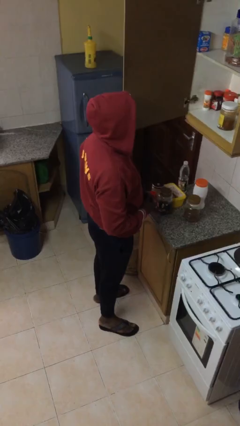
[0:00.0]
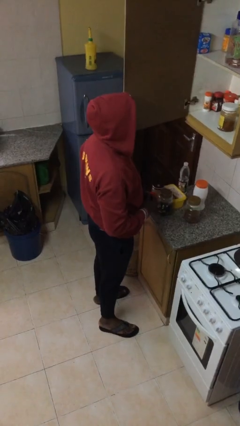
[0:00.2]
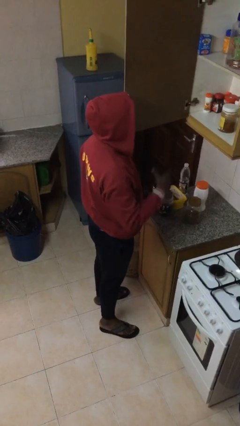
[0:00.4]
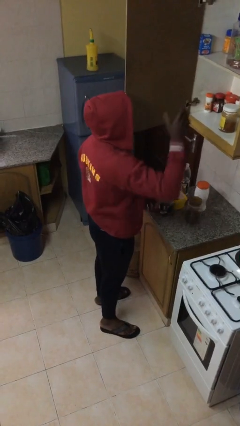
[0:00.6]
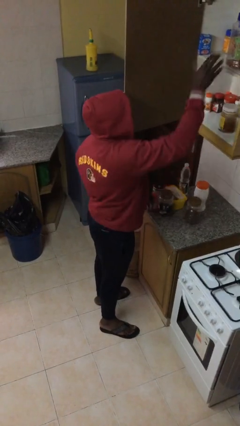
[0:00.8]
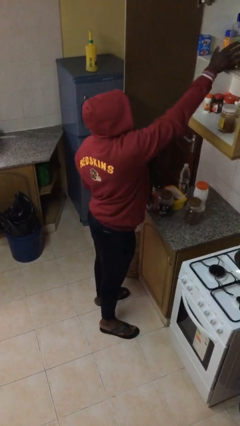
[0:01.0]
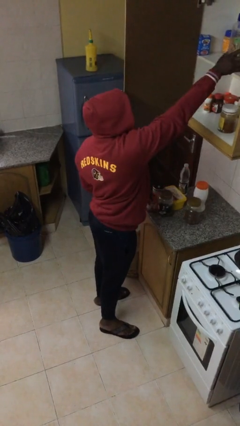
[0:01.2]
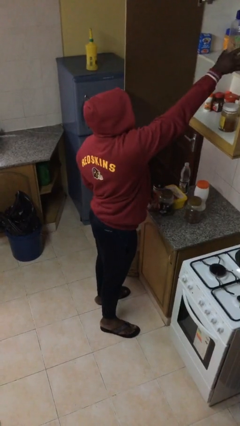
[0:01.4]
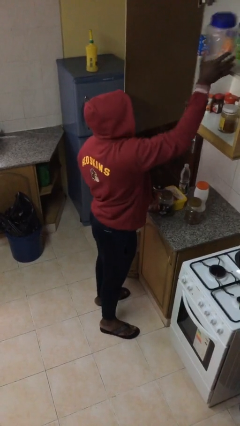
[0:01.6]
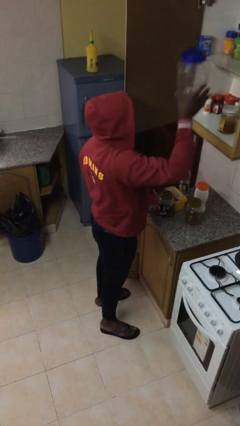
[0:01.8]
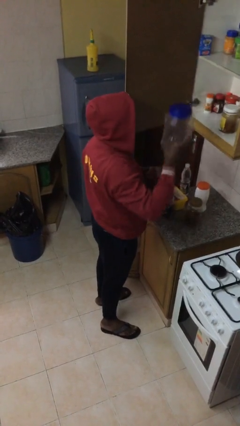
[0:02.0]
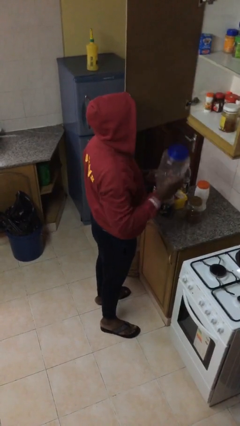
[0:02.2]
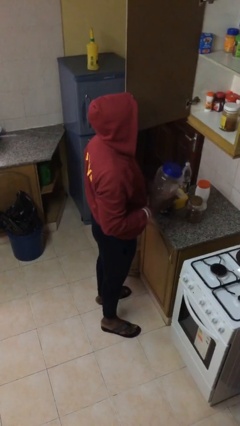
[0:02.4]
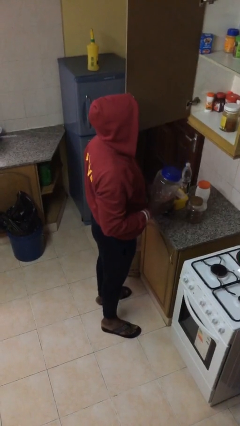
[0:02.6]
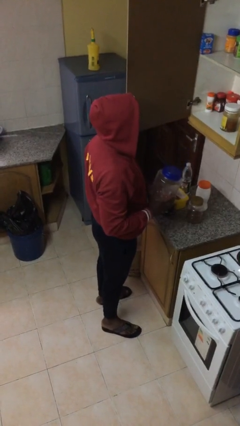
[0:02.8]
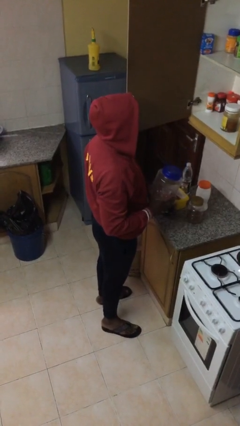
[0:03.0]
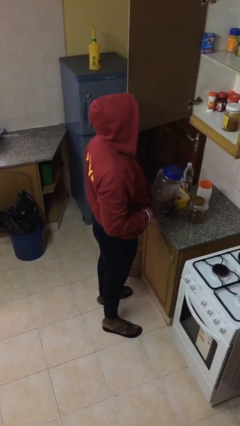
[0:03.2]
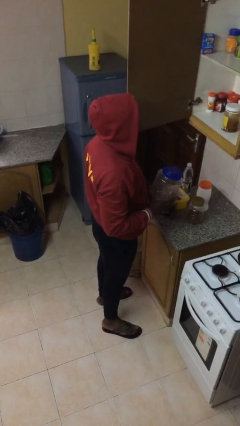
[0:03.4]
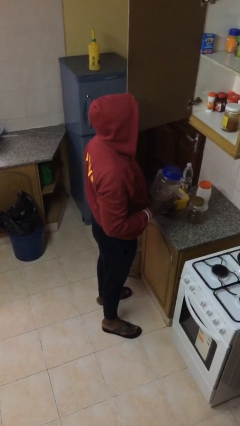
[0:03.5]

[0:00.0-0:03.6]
person picks up object from shelf

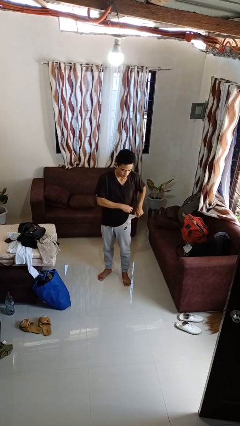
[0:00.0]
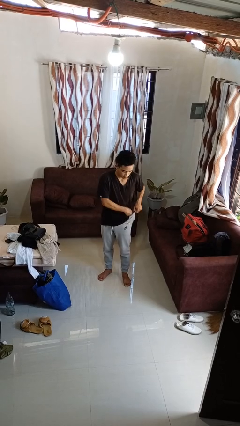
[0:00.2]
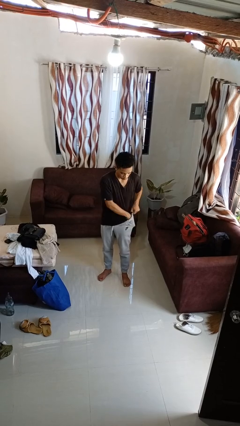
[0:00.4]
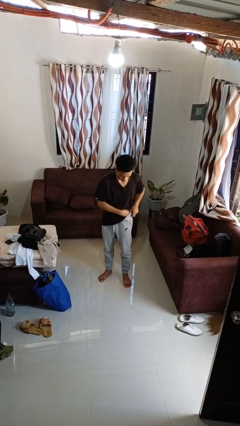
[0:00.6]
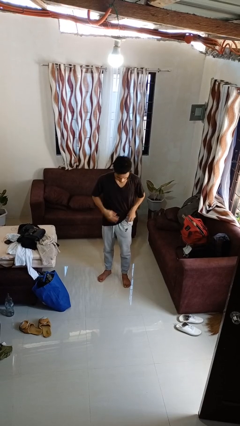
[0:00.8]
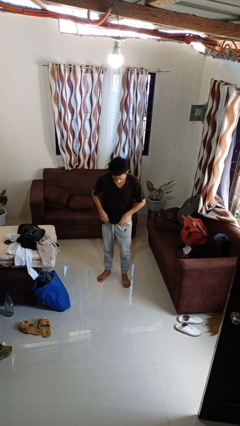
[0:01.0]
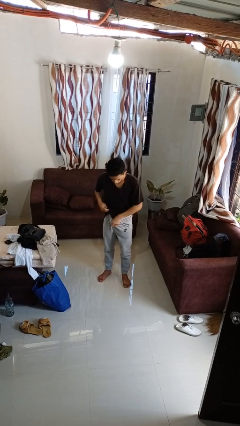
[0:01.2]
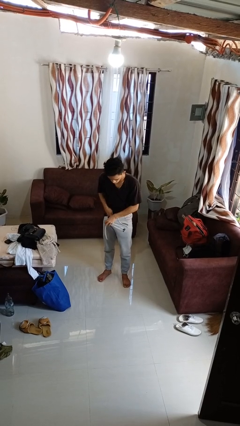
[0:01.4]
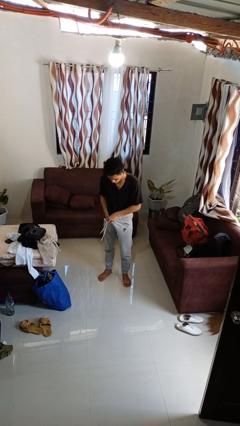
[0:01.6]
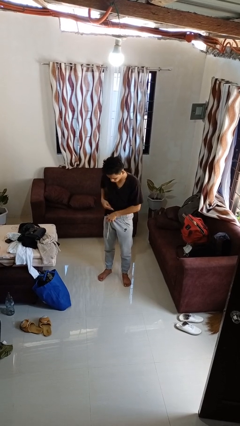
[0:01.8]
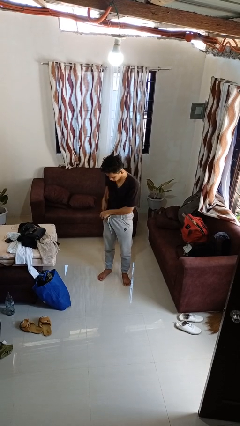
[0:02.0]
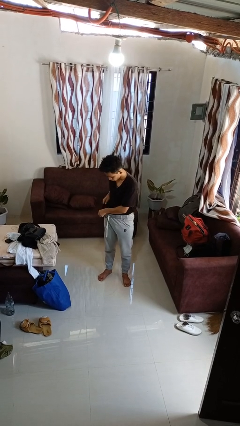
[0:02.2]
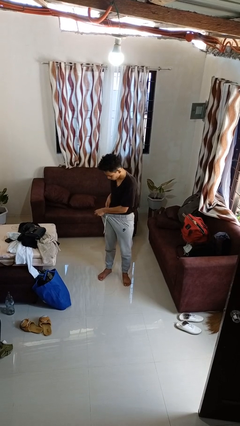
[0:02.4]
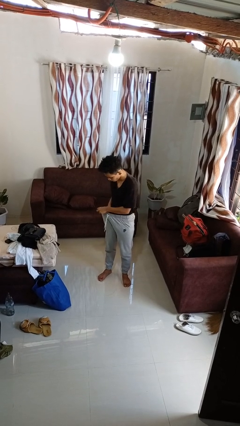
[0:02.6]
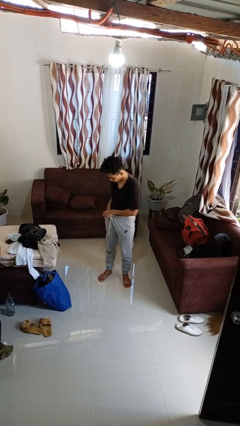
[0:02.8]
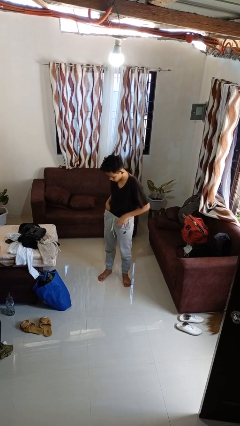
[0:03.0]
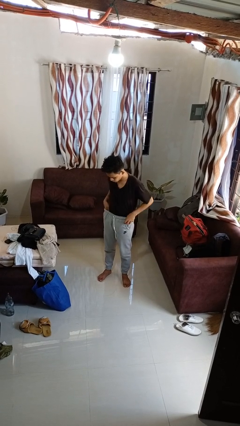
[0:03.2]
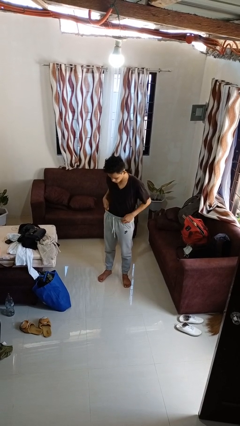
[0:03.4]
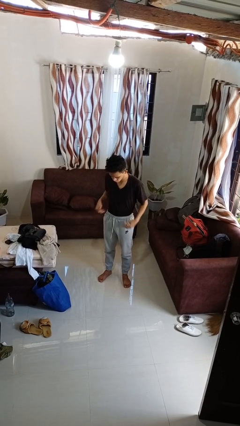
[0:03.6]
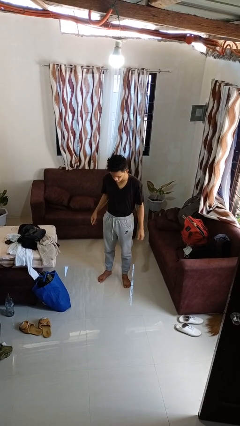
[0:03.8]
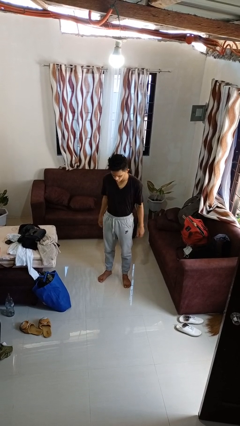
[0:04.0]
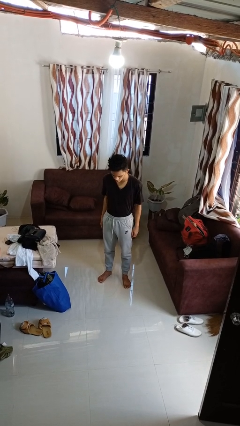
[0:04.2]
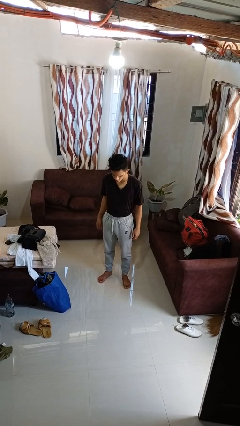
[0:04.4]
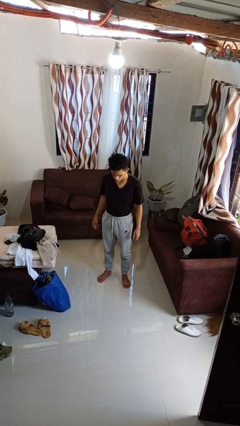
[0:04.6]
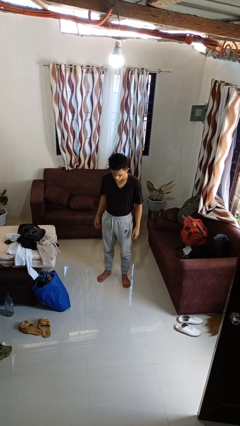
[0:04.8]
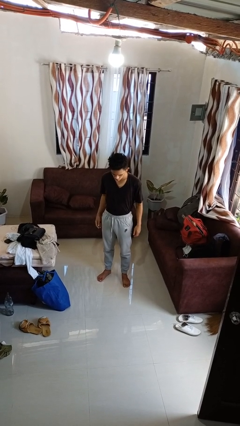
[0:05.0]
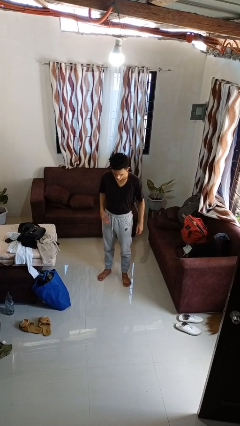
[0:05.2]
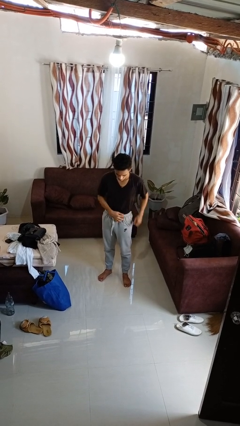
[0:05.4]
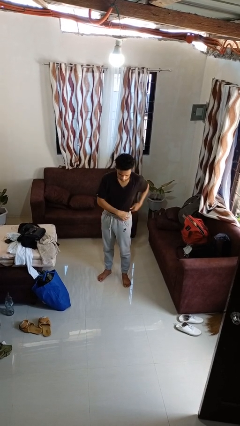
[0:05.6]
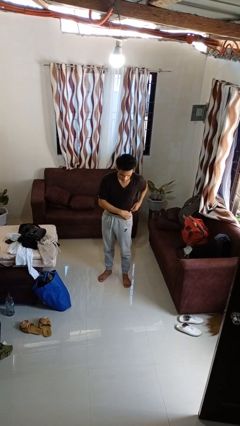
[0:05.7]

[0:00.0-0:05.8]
person tucks in shirt

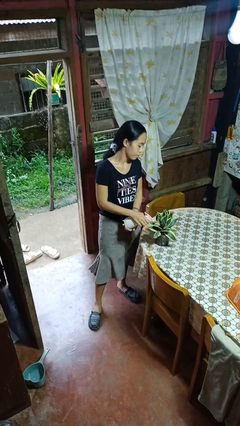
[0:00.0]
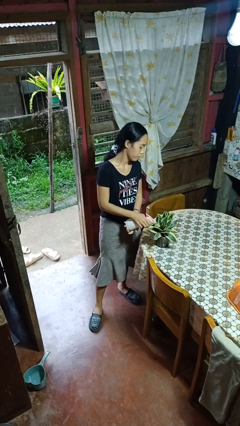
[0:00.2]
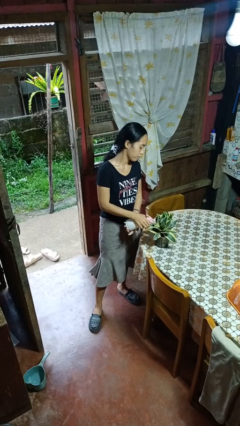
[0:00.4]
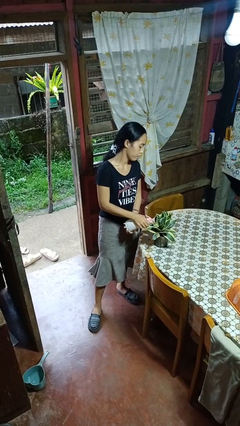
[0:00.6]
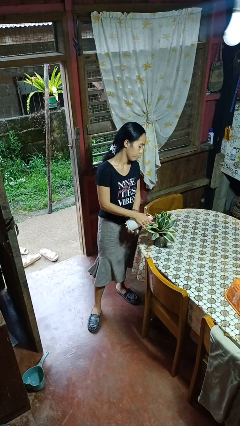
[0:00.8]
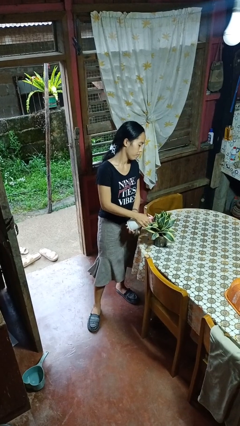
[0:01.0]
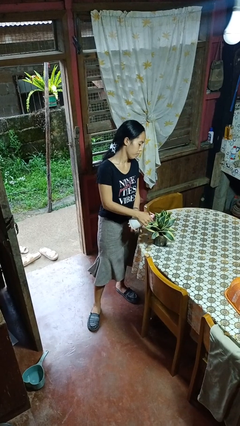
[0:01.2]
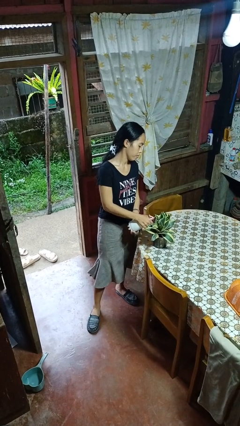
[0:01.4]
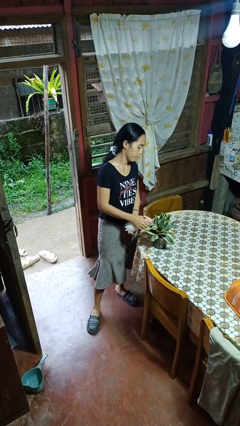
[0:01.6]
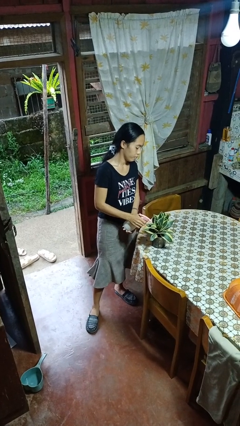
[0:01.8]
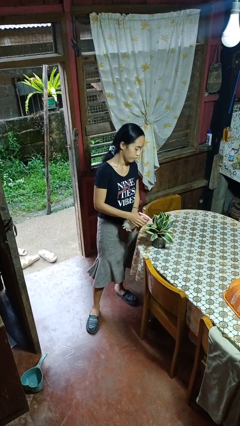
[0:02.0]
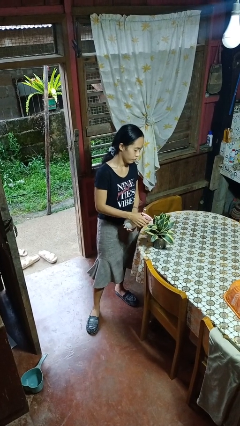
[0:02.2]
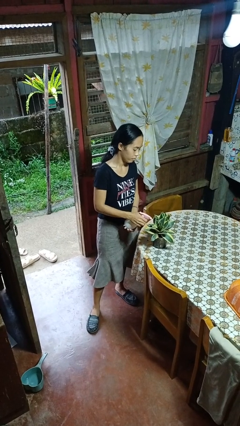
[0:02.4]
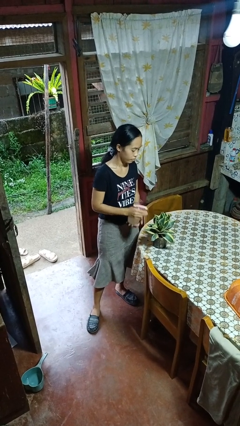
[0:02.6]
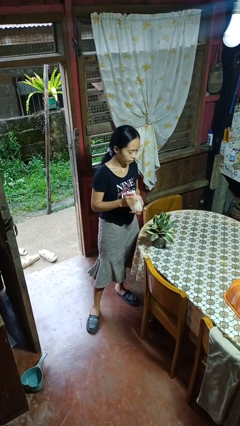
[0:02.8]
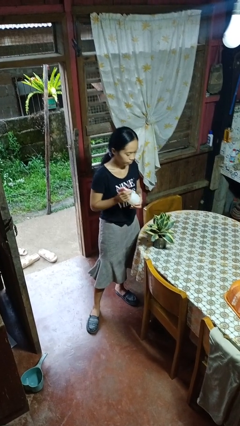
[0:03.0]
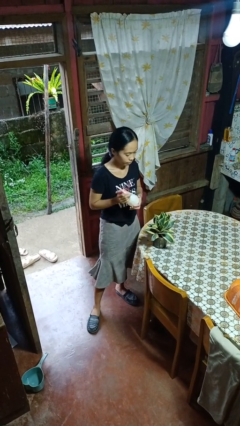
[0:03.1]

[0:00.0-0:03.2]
person waters houseplant

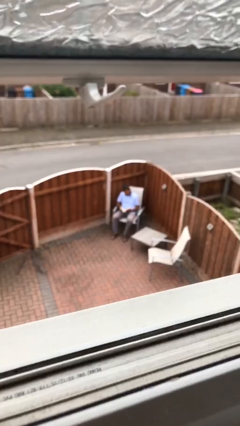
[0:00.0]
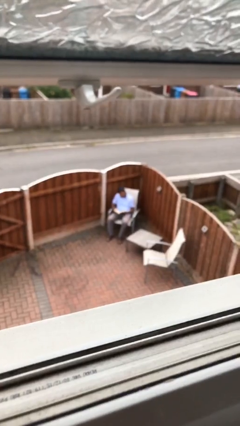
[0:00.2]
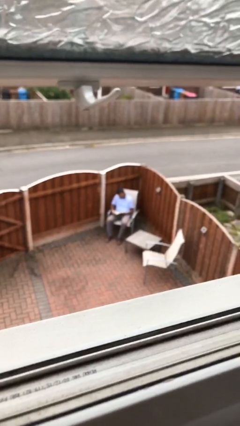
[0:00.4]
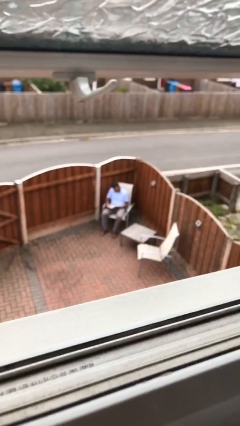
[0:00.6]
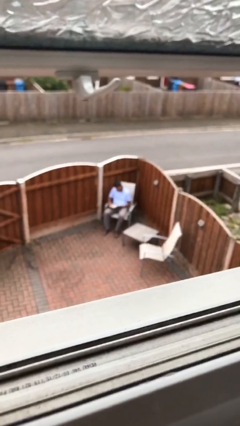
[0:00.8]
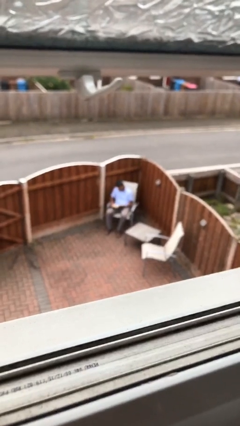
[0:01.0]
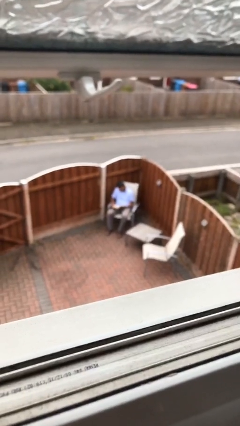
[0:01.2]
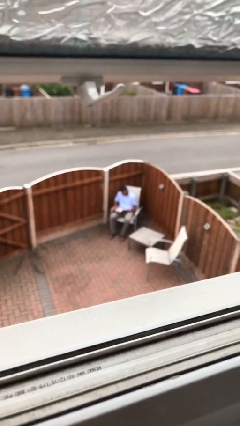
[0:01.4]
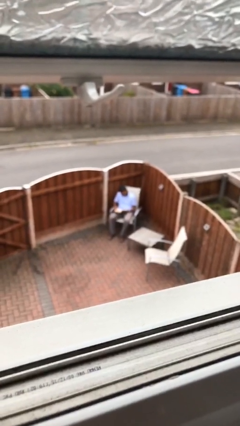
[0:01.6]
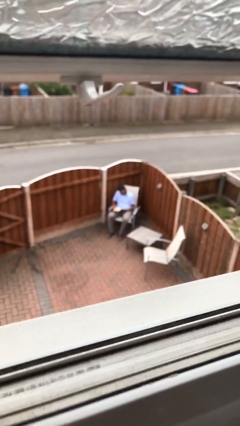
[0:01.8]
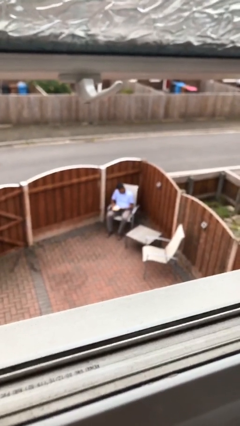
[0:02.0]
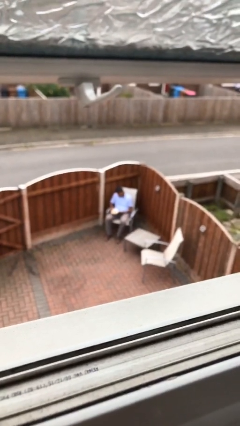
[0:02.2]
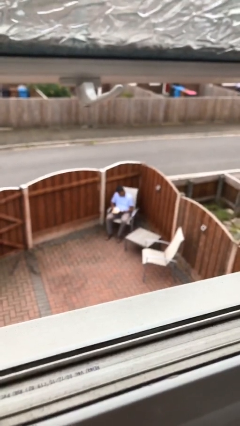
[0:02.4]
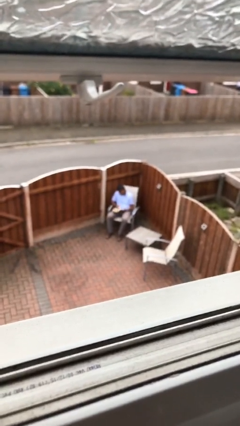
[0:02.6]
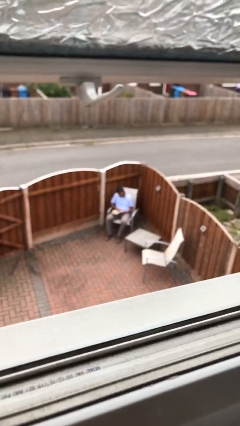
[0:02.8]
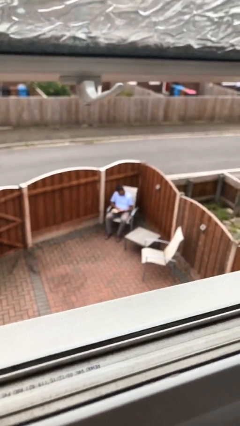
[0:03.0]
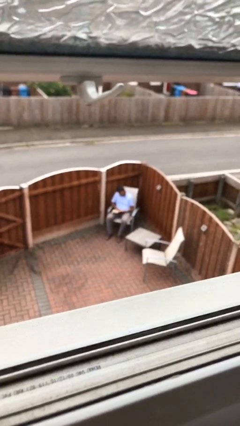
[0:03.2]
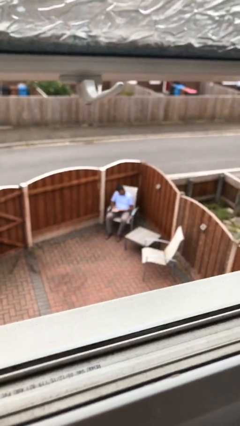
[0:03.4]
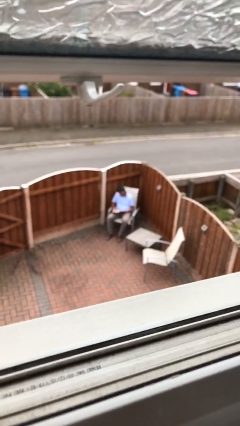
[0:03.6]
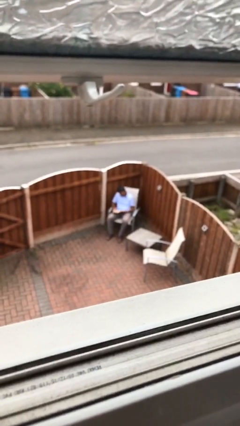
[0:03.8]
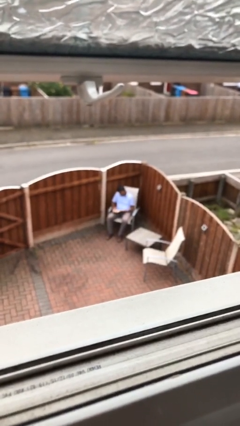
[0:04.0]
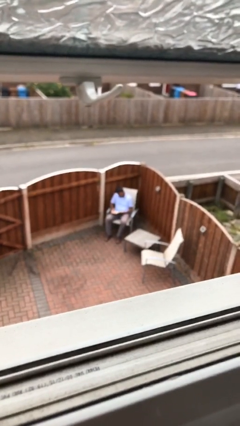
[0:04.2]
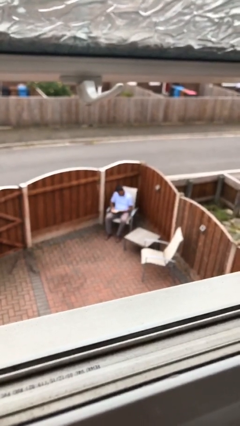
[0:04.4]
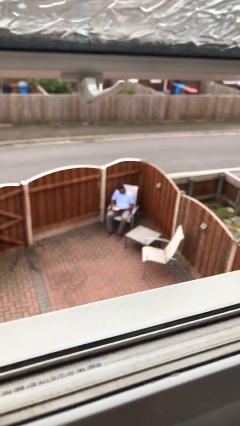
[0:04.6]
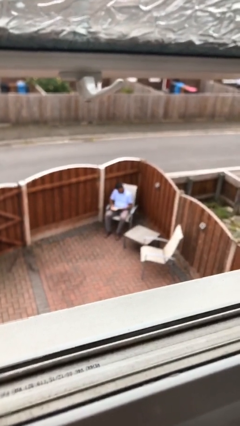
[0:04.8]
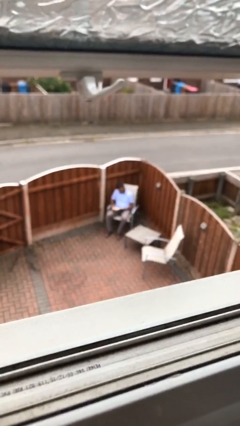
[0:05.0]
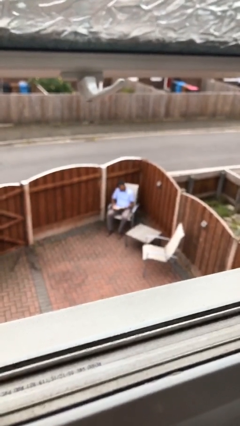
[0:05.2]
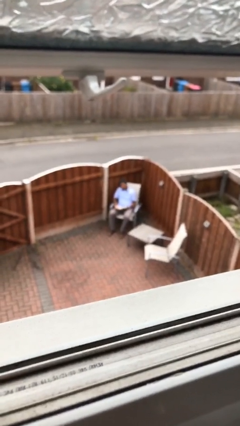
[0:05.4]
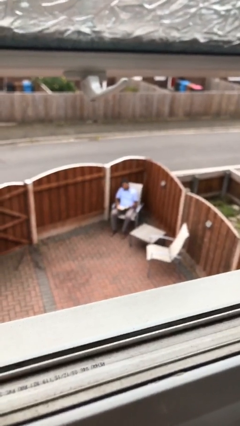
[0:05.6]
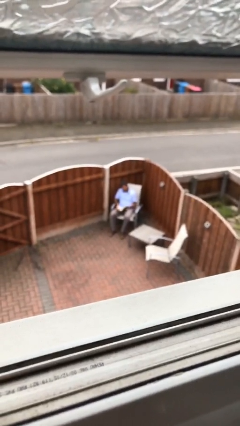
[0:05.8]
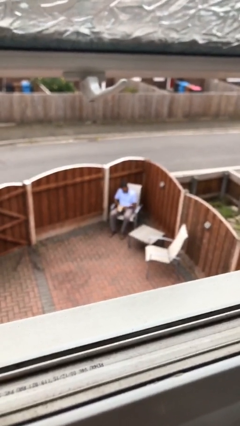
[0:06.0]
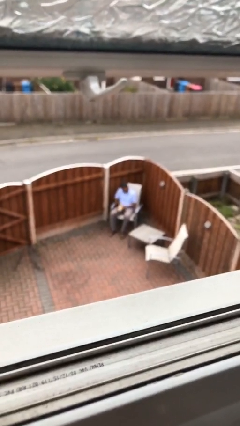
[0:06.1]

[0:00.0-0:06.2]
person reads document
